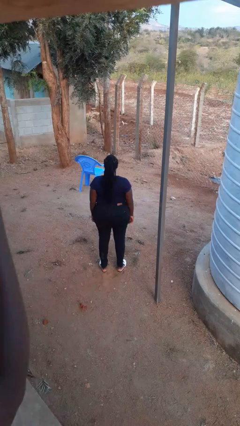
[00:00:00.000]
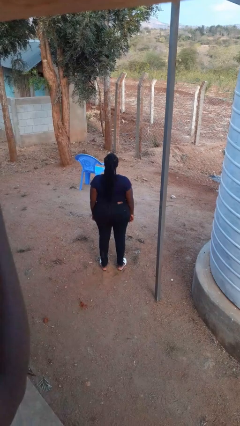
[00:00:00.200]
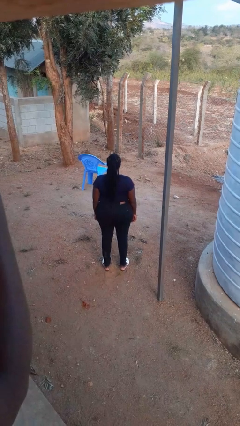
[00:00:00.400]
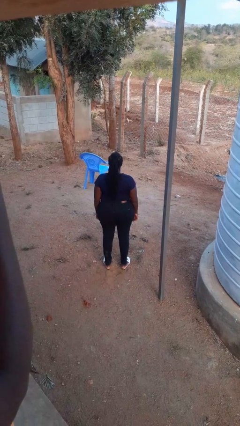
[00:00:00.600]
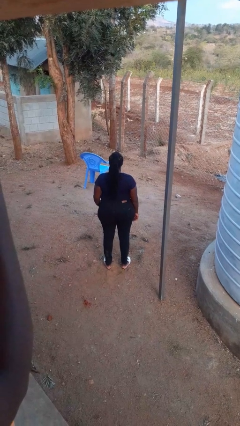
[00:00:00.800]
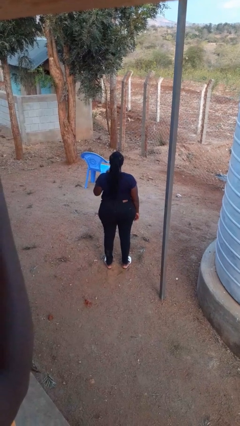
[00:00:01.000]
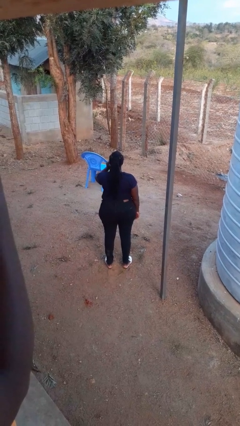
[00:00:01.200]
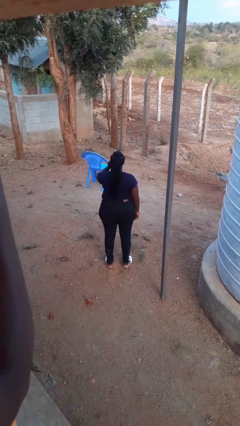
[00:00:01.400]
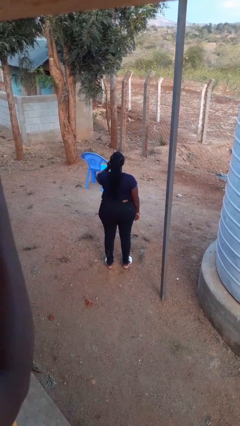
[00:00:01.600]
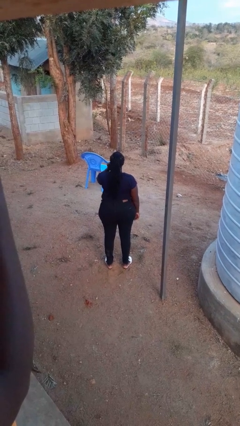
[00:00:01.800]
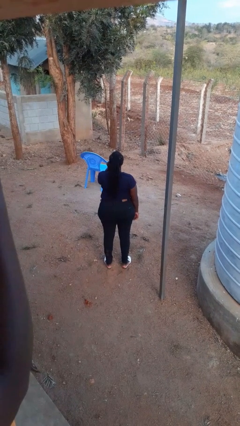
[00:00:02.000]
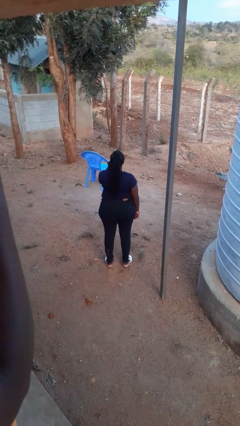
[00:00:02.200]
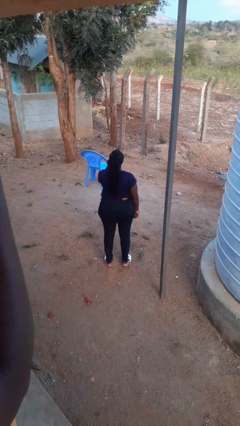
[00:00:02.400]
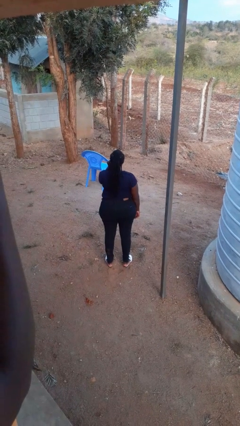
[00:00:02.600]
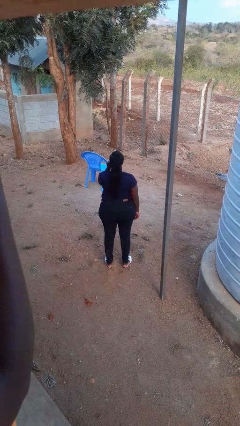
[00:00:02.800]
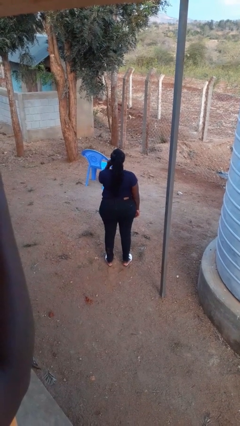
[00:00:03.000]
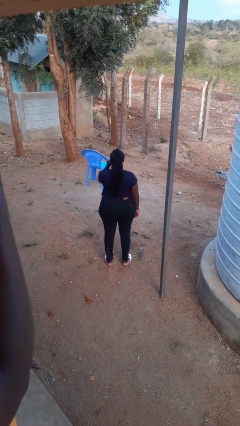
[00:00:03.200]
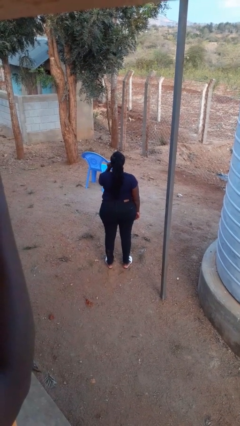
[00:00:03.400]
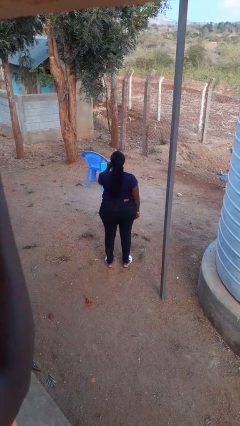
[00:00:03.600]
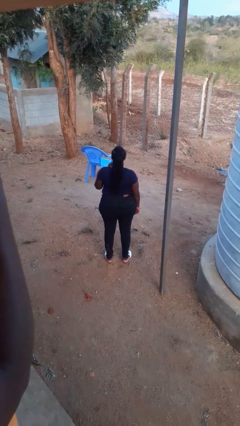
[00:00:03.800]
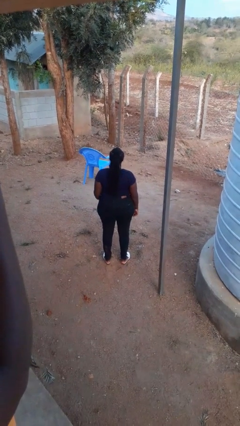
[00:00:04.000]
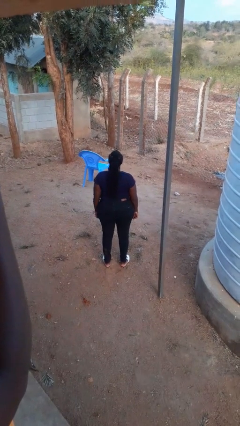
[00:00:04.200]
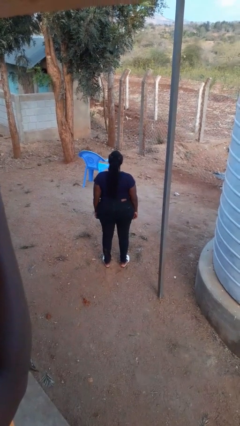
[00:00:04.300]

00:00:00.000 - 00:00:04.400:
person touches earlobe

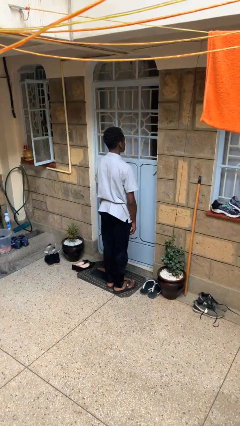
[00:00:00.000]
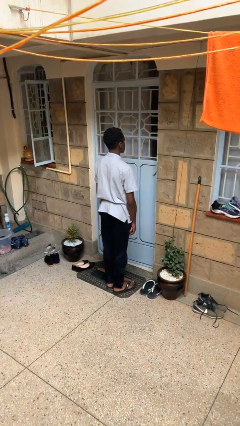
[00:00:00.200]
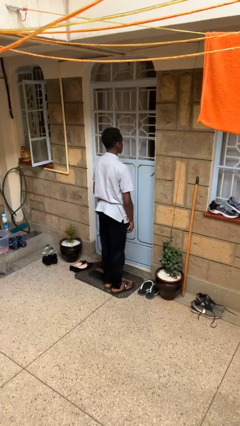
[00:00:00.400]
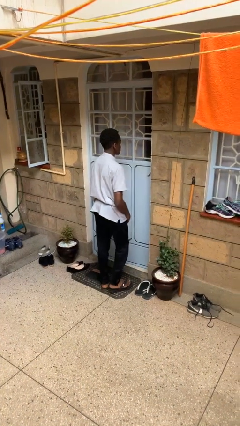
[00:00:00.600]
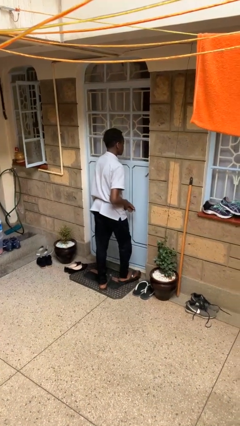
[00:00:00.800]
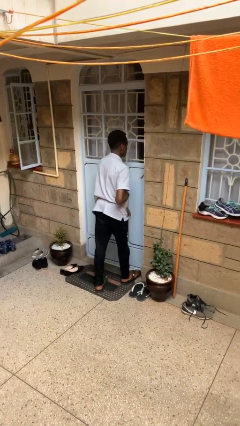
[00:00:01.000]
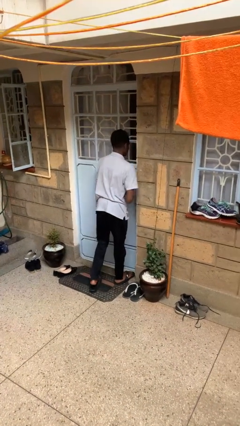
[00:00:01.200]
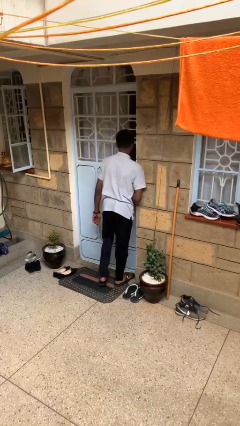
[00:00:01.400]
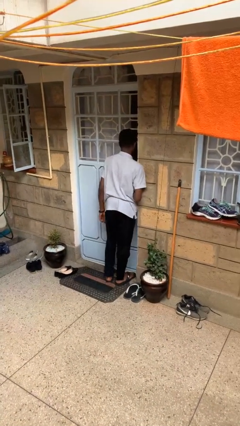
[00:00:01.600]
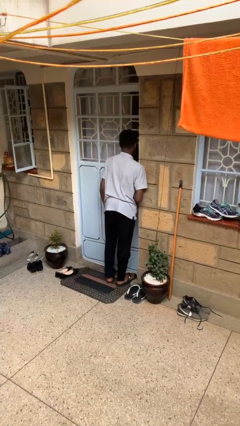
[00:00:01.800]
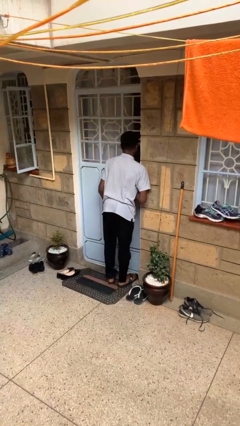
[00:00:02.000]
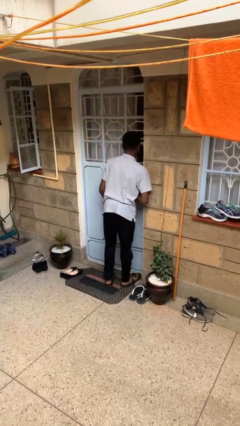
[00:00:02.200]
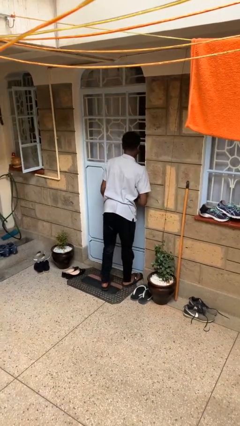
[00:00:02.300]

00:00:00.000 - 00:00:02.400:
person bumps into wall

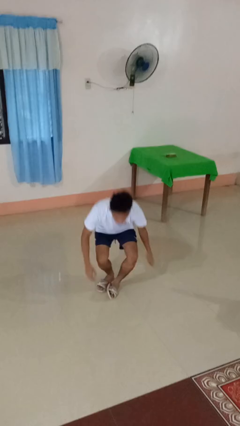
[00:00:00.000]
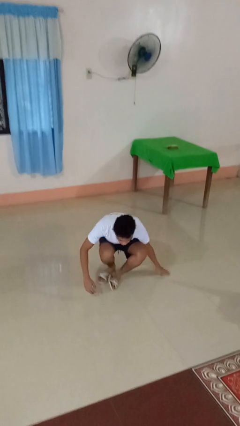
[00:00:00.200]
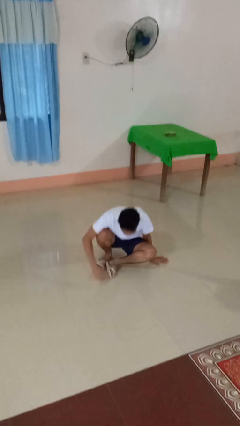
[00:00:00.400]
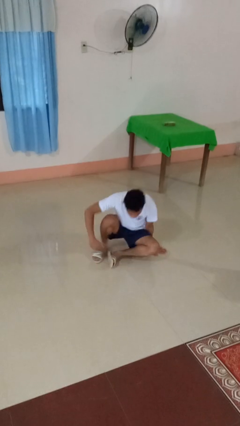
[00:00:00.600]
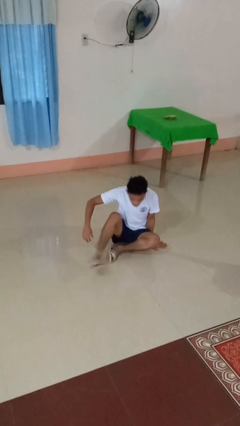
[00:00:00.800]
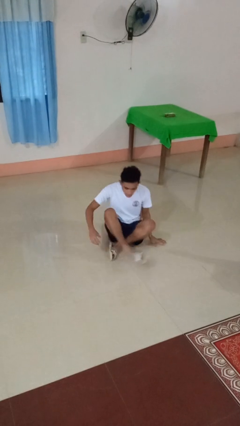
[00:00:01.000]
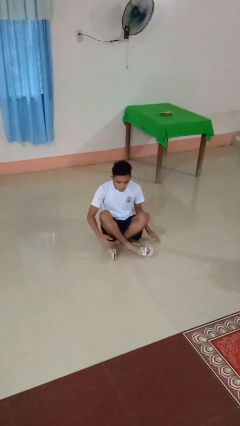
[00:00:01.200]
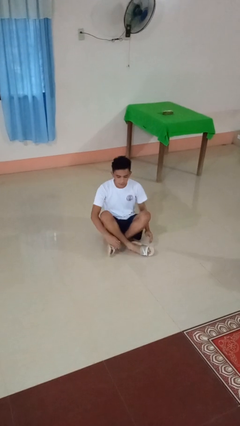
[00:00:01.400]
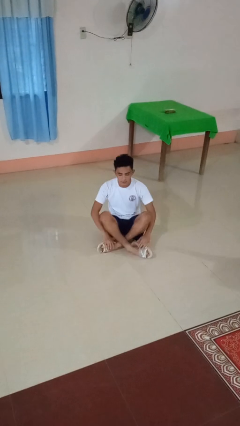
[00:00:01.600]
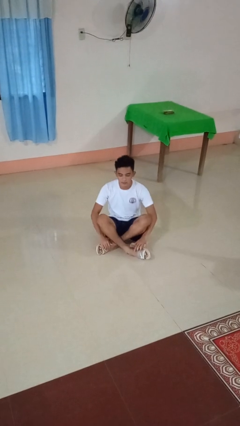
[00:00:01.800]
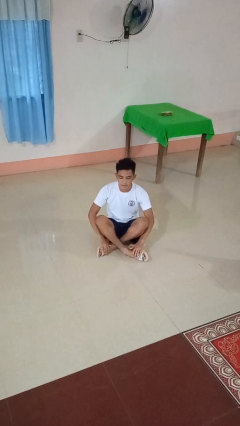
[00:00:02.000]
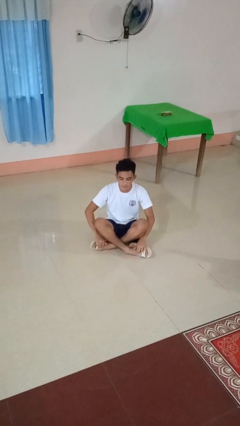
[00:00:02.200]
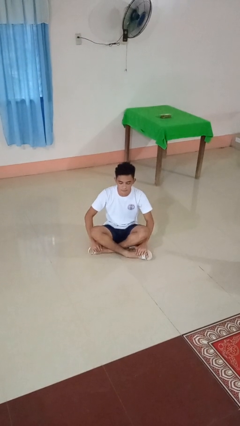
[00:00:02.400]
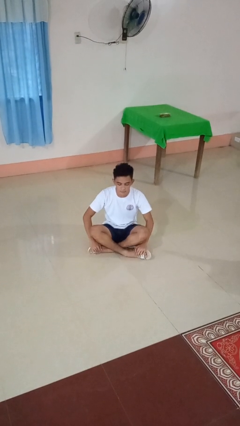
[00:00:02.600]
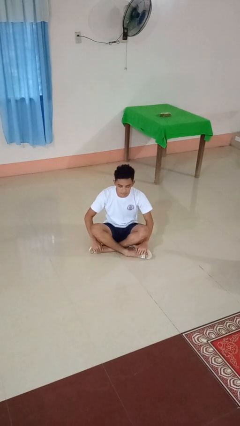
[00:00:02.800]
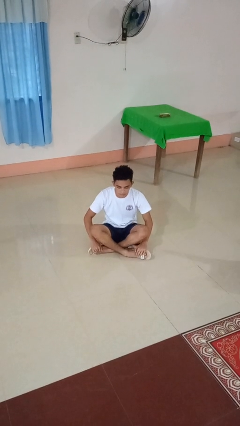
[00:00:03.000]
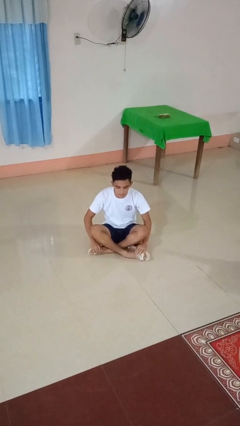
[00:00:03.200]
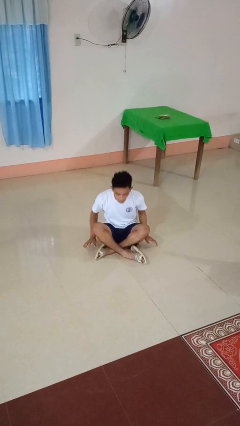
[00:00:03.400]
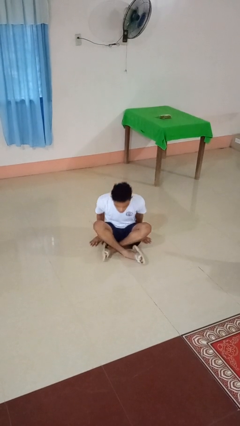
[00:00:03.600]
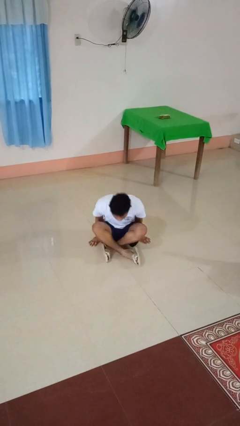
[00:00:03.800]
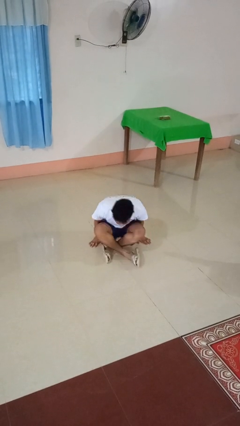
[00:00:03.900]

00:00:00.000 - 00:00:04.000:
person sits crisscross

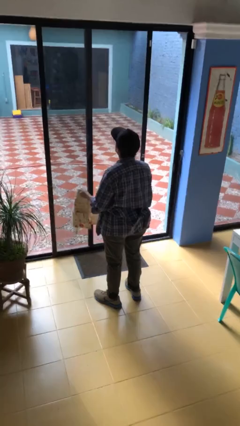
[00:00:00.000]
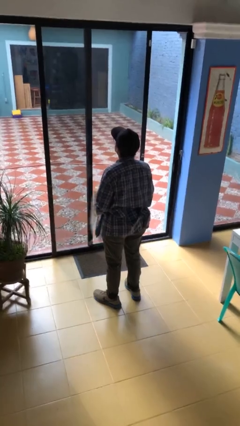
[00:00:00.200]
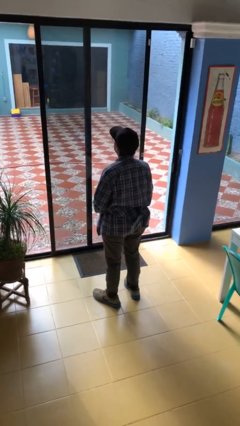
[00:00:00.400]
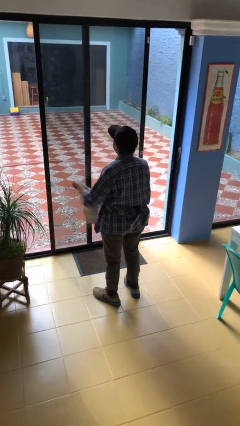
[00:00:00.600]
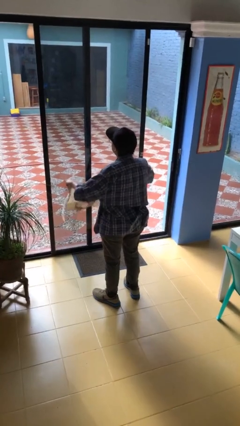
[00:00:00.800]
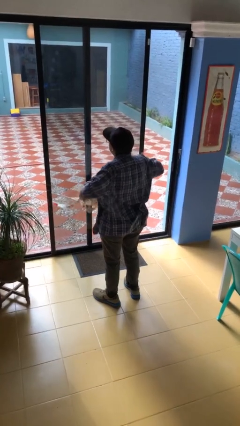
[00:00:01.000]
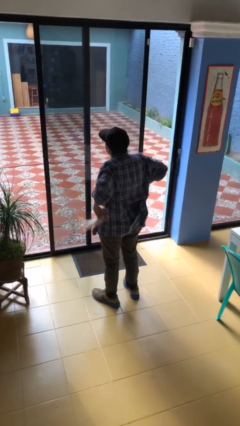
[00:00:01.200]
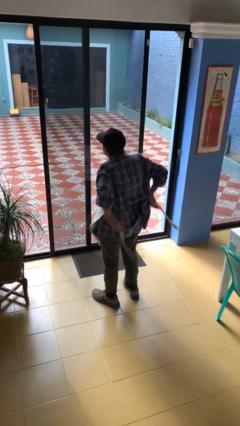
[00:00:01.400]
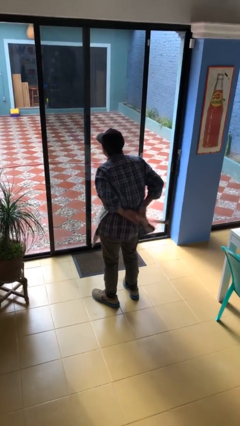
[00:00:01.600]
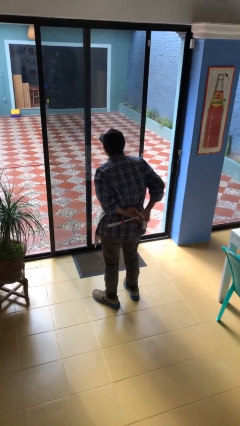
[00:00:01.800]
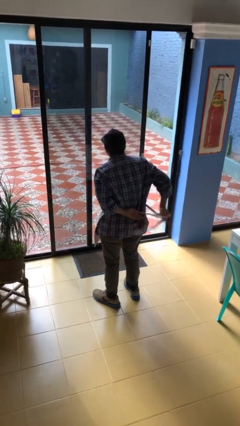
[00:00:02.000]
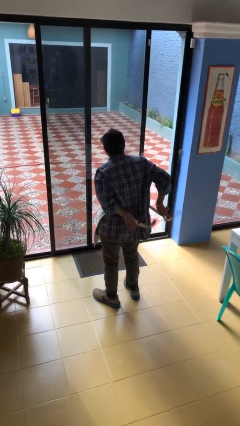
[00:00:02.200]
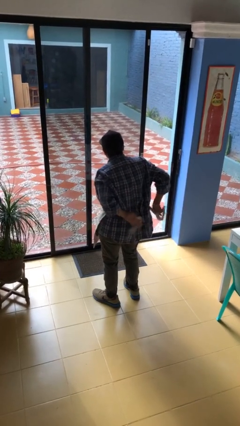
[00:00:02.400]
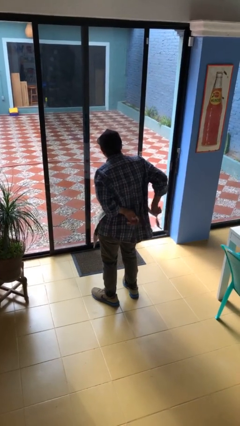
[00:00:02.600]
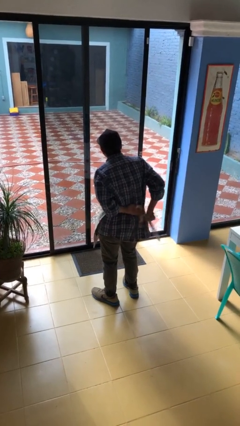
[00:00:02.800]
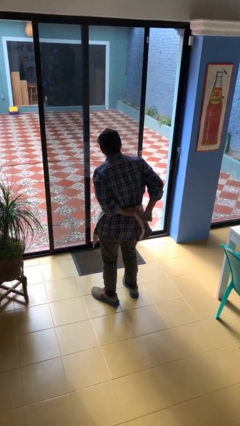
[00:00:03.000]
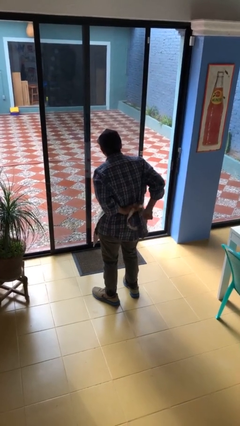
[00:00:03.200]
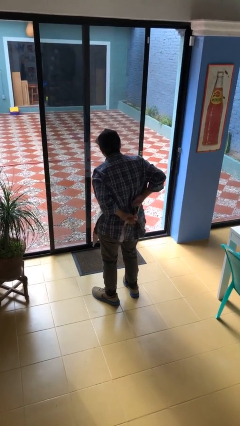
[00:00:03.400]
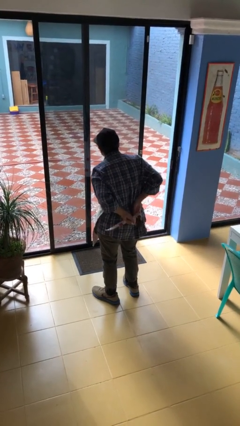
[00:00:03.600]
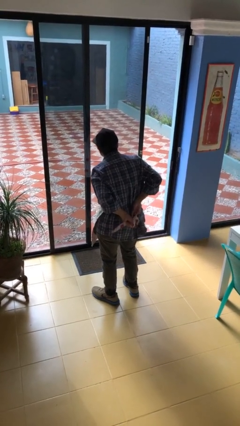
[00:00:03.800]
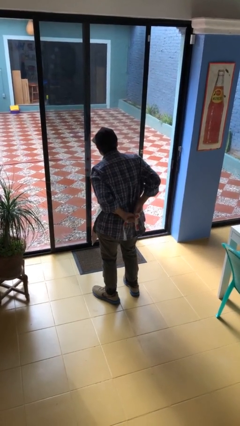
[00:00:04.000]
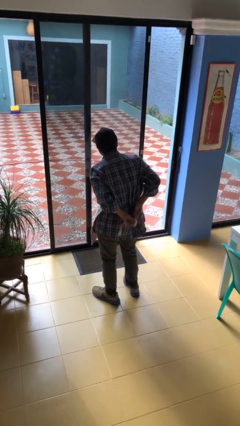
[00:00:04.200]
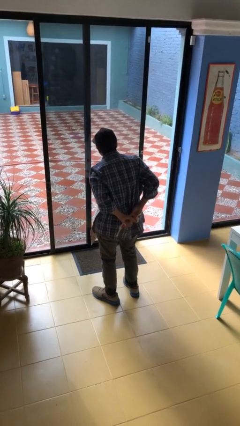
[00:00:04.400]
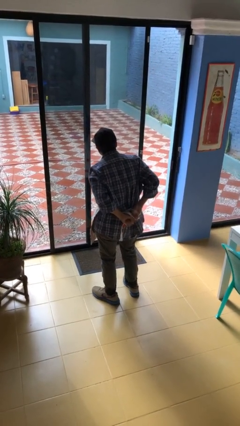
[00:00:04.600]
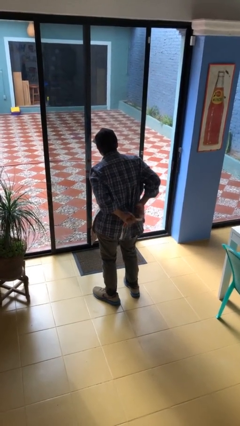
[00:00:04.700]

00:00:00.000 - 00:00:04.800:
person puts on apron

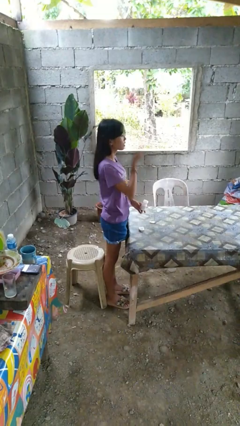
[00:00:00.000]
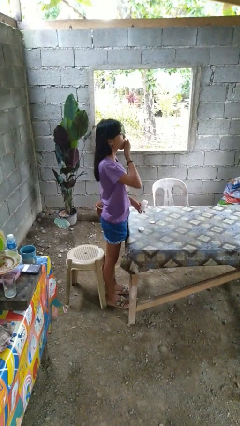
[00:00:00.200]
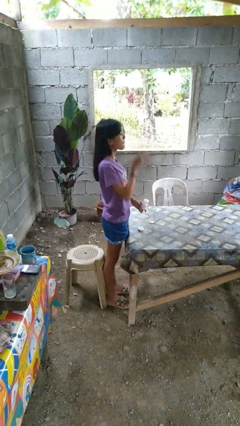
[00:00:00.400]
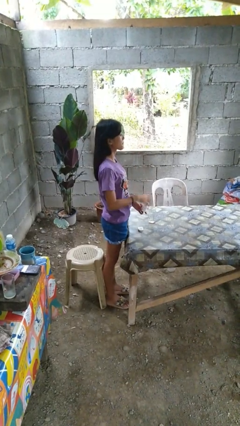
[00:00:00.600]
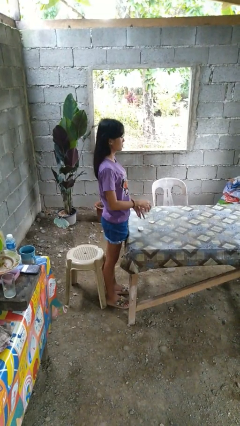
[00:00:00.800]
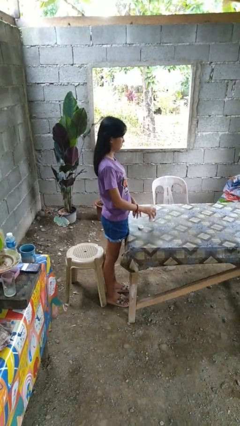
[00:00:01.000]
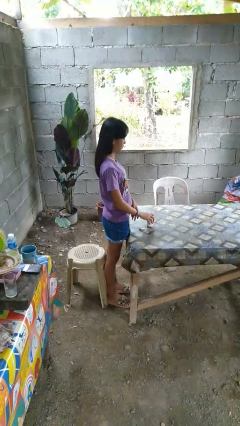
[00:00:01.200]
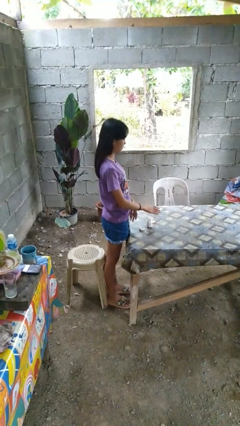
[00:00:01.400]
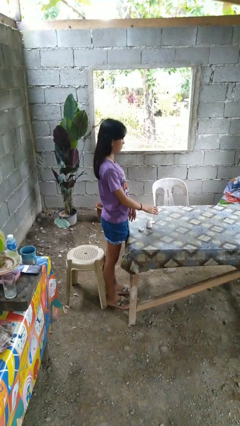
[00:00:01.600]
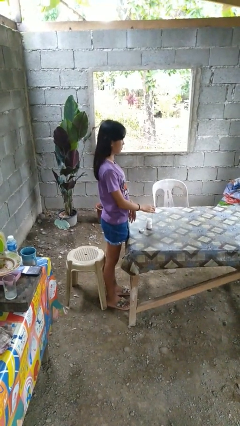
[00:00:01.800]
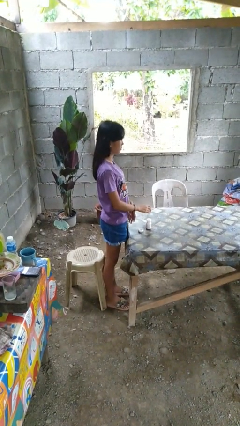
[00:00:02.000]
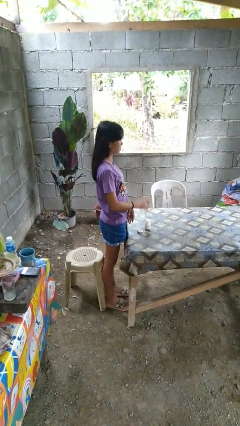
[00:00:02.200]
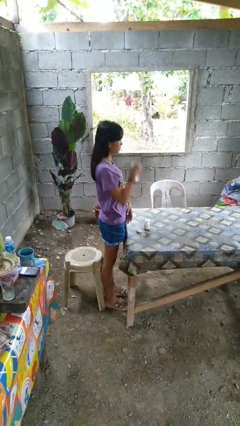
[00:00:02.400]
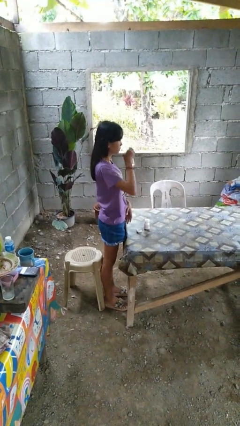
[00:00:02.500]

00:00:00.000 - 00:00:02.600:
person takes medicine pills
